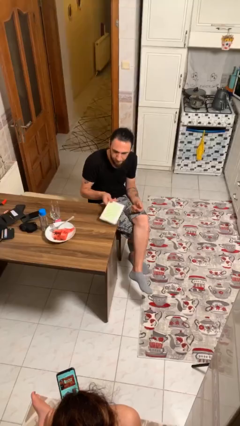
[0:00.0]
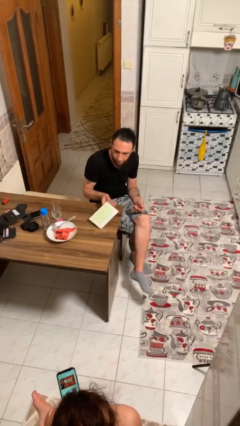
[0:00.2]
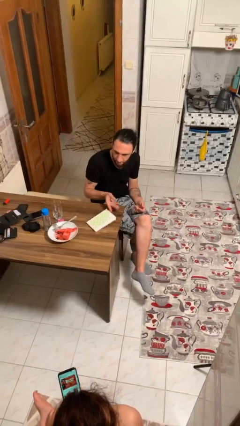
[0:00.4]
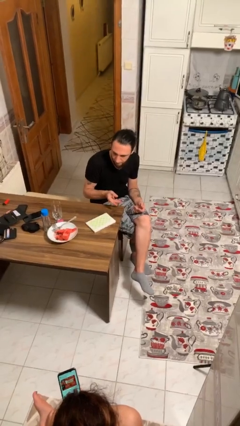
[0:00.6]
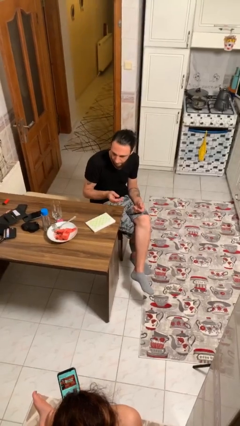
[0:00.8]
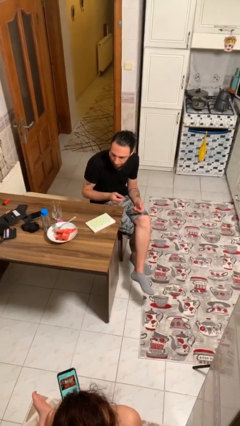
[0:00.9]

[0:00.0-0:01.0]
person puts down object on table

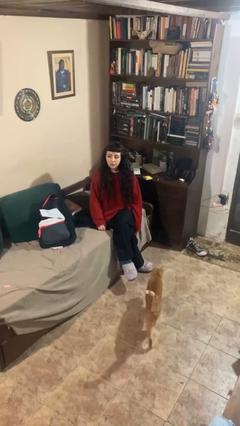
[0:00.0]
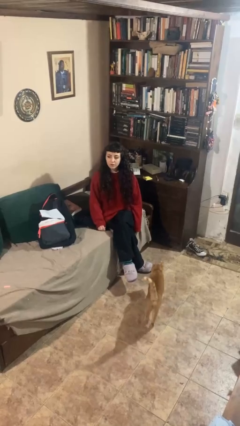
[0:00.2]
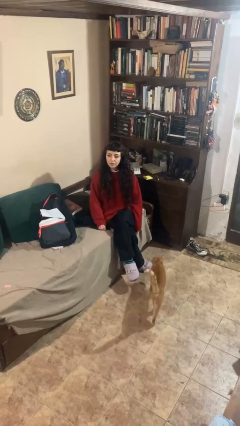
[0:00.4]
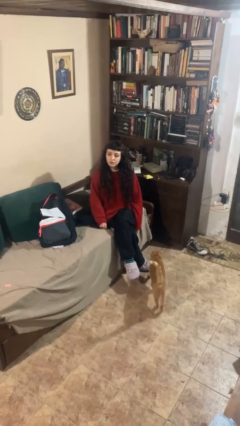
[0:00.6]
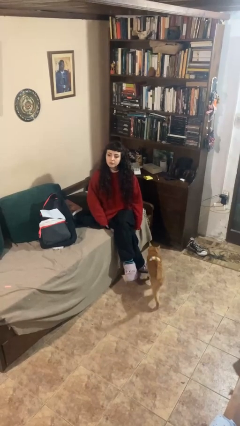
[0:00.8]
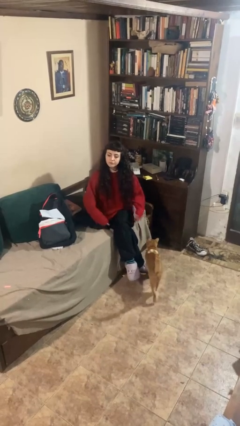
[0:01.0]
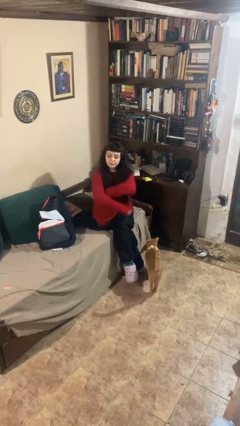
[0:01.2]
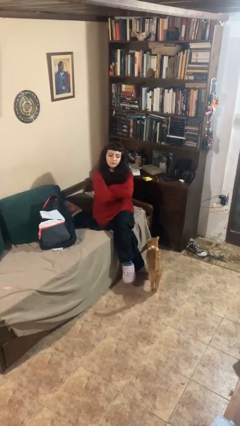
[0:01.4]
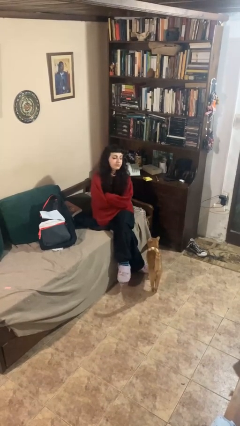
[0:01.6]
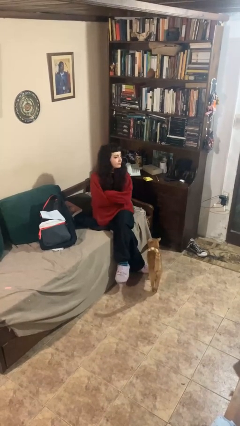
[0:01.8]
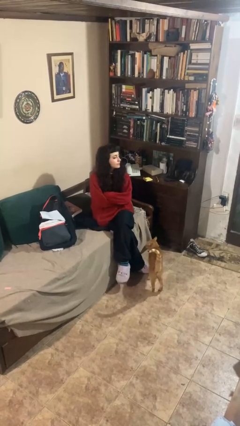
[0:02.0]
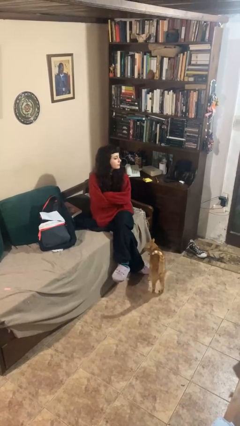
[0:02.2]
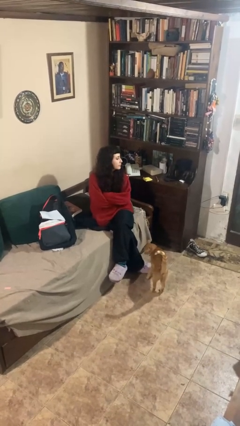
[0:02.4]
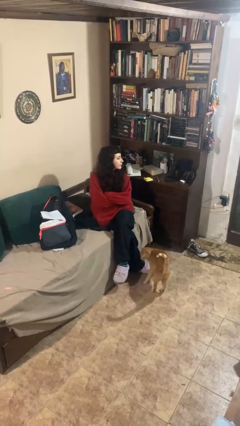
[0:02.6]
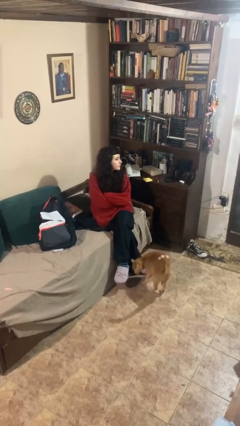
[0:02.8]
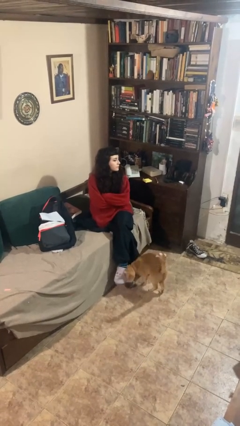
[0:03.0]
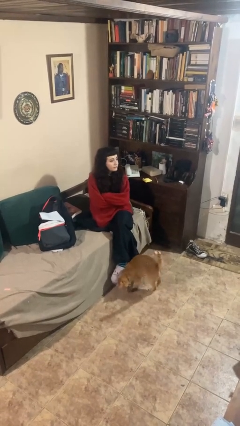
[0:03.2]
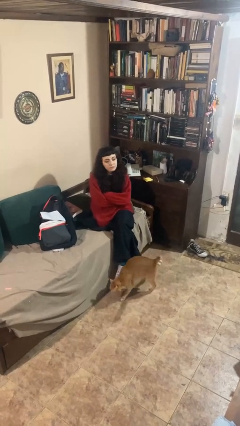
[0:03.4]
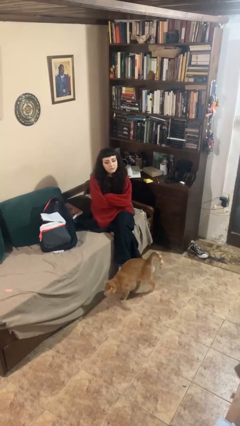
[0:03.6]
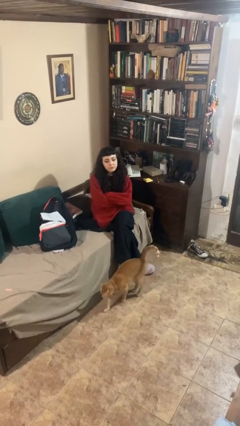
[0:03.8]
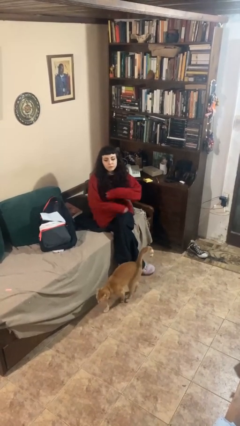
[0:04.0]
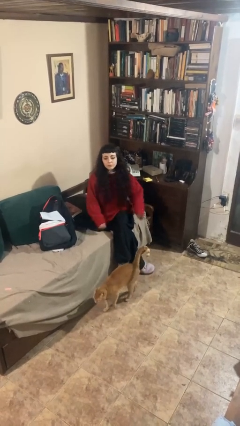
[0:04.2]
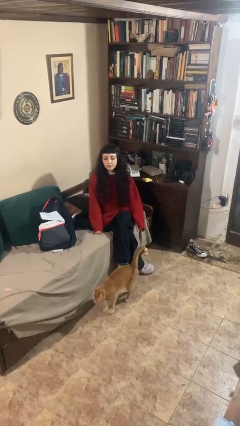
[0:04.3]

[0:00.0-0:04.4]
person crosses arms

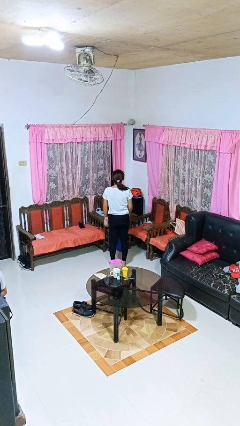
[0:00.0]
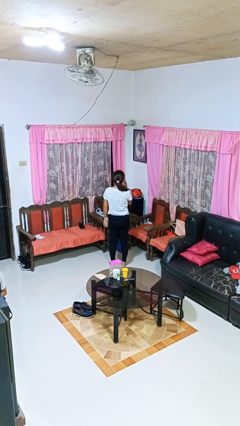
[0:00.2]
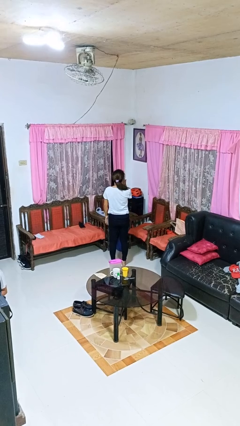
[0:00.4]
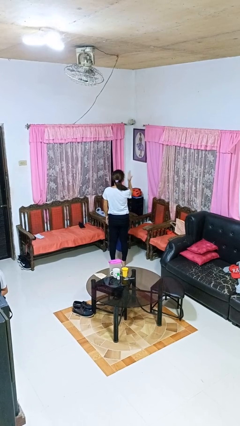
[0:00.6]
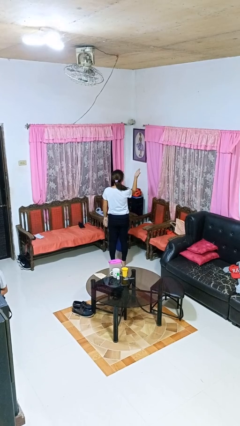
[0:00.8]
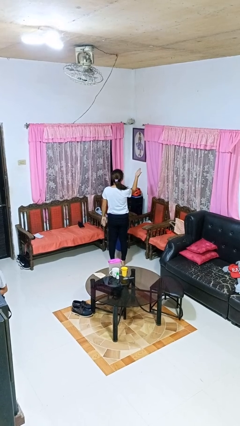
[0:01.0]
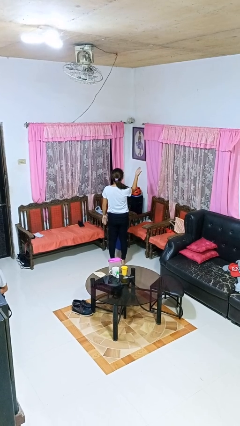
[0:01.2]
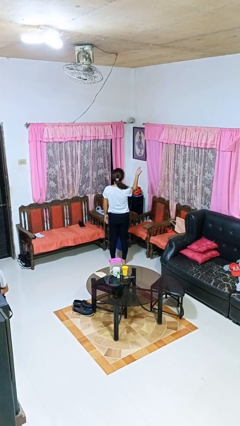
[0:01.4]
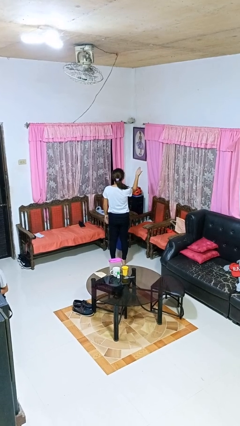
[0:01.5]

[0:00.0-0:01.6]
person gestures blow kiss

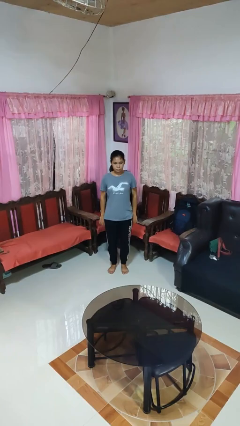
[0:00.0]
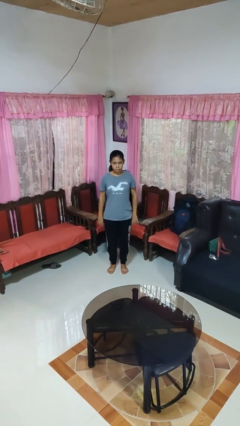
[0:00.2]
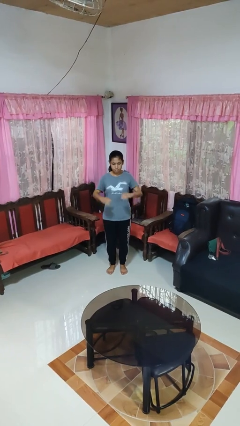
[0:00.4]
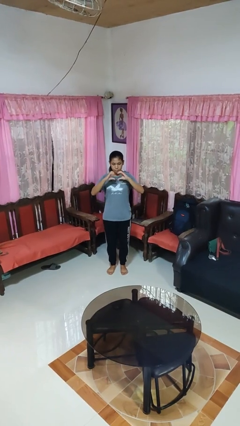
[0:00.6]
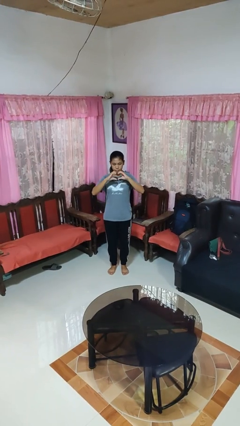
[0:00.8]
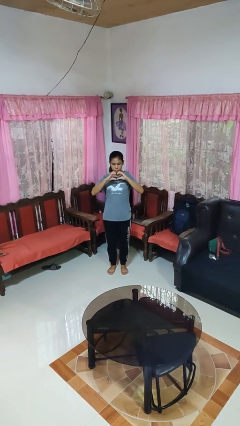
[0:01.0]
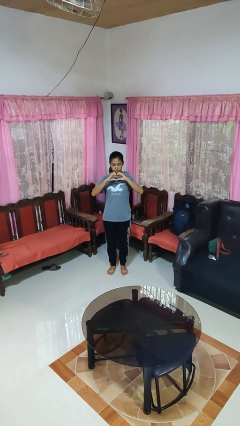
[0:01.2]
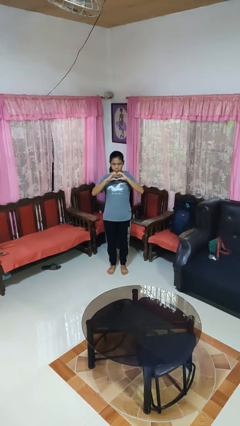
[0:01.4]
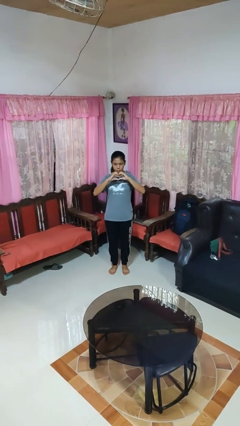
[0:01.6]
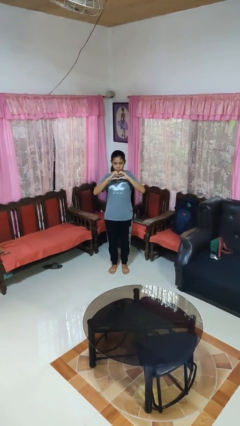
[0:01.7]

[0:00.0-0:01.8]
person gestures heart

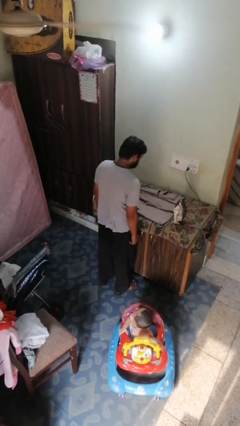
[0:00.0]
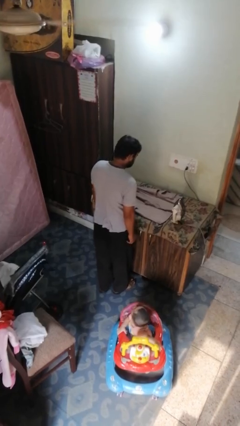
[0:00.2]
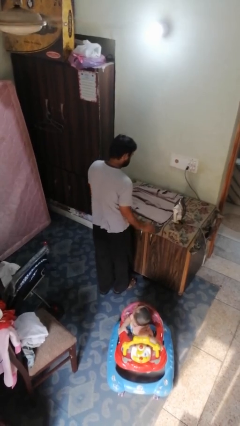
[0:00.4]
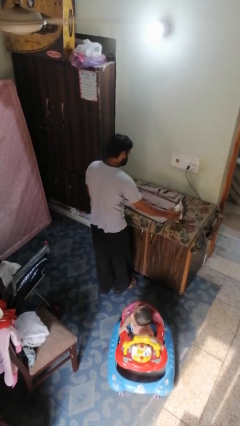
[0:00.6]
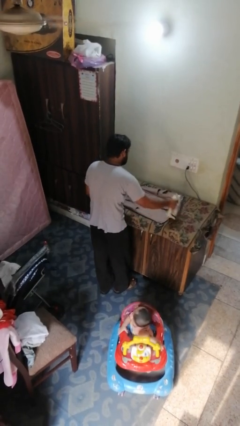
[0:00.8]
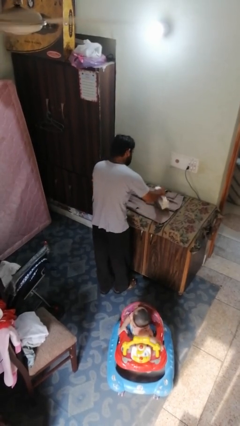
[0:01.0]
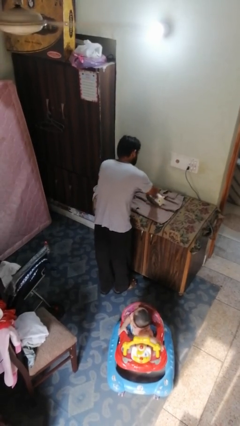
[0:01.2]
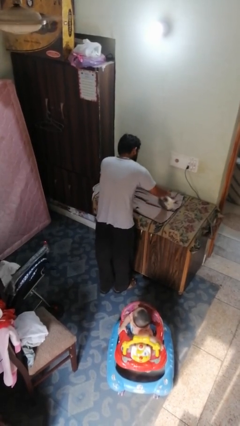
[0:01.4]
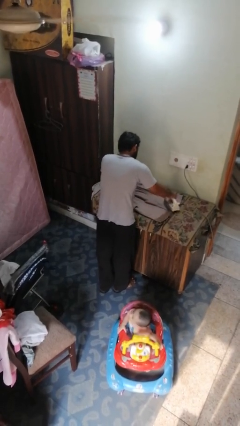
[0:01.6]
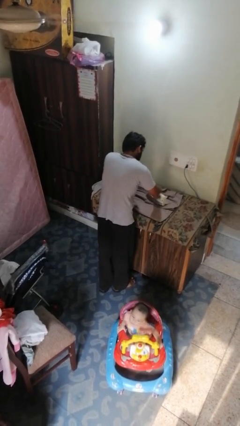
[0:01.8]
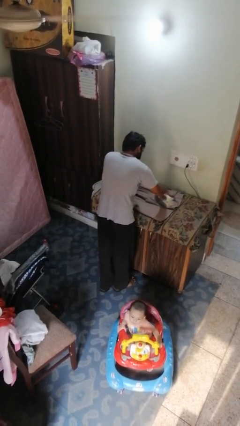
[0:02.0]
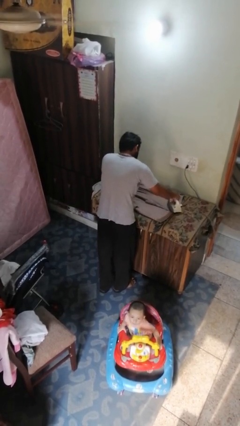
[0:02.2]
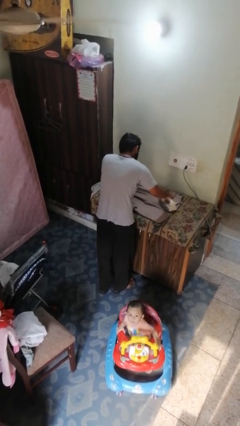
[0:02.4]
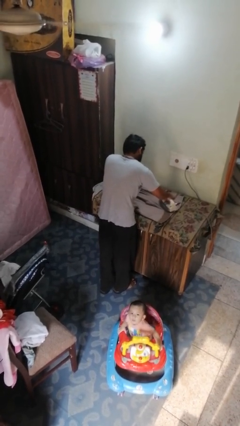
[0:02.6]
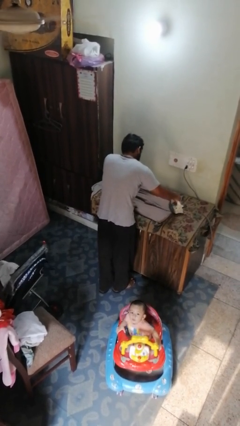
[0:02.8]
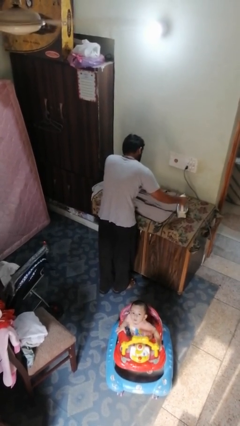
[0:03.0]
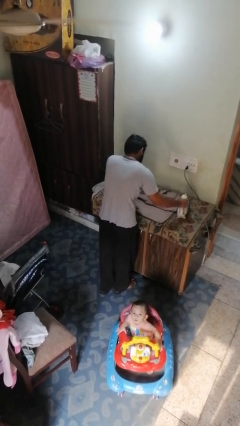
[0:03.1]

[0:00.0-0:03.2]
person irons clothes

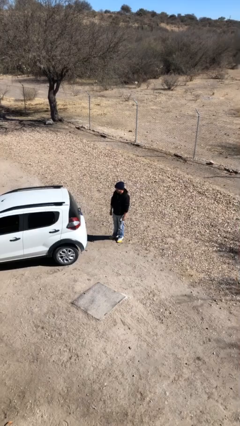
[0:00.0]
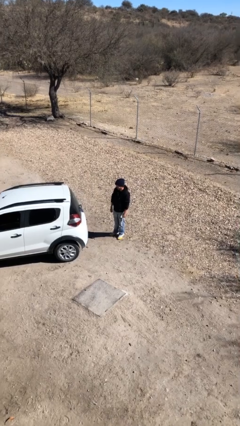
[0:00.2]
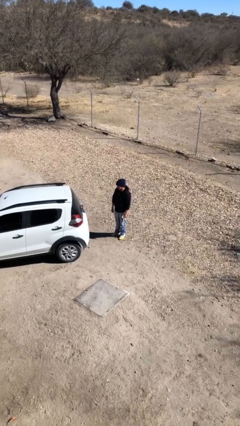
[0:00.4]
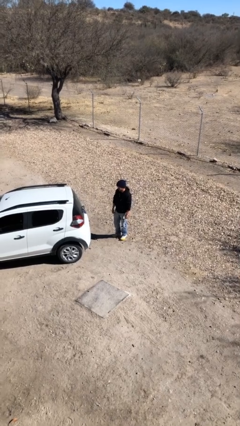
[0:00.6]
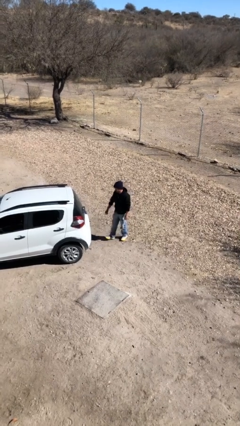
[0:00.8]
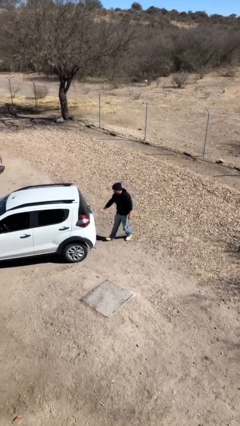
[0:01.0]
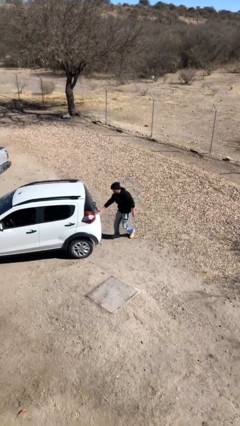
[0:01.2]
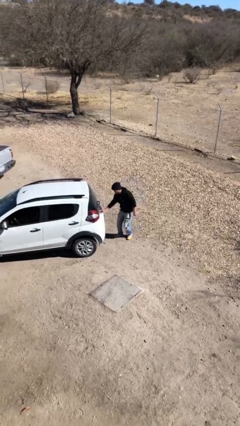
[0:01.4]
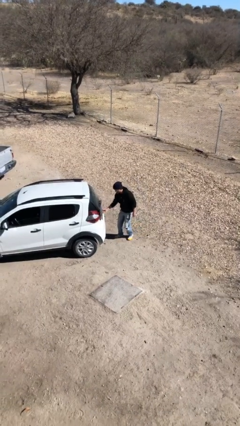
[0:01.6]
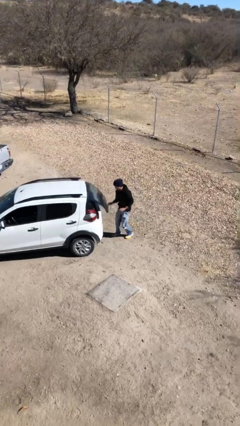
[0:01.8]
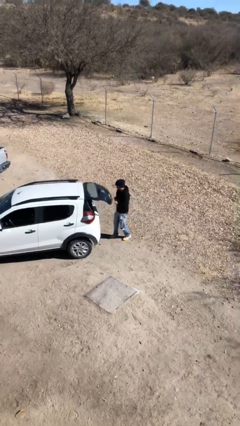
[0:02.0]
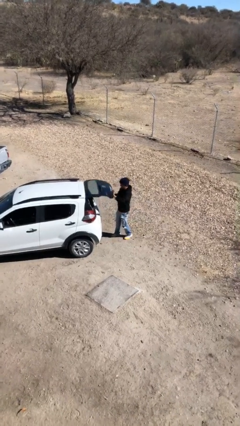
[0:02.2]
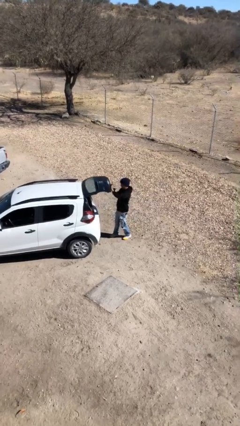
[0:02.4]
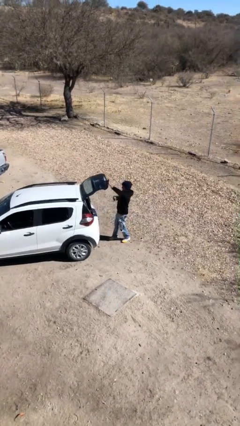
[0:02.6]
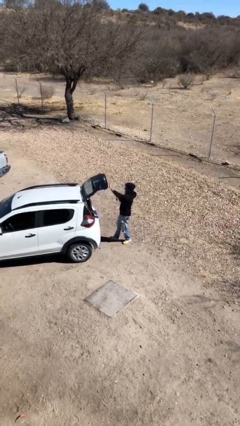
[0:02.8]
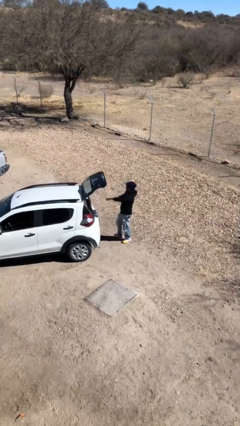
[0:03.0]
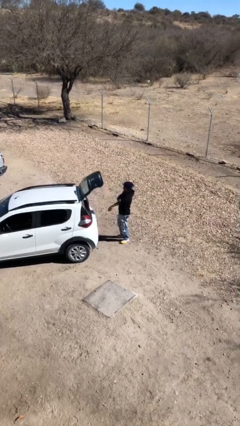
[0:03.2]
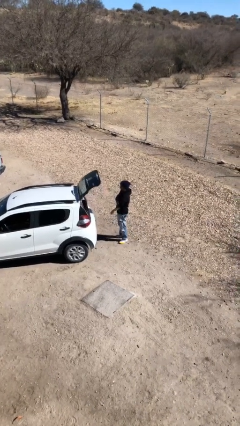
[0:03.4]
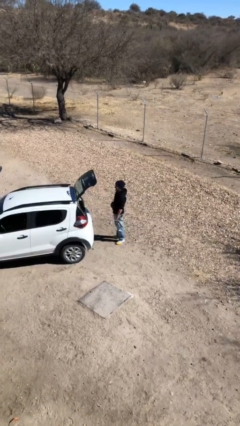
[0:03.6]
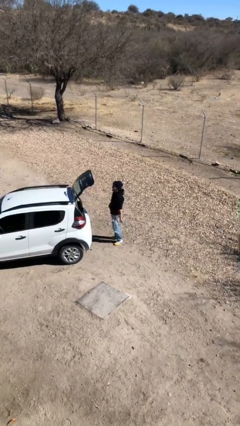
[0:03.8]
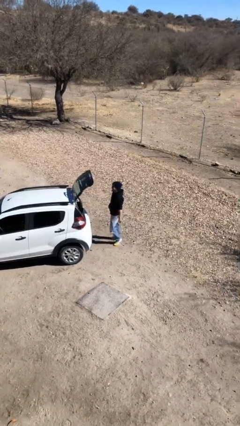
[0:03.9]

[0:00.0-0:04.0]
person opens car trunk

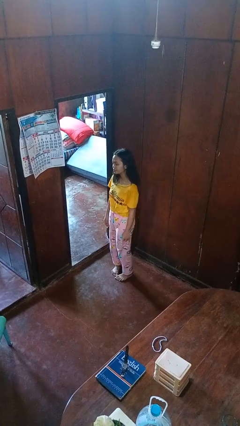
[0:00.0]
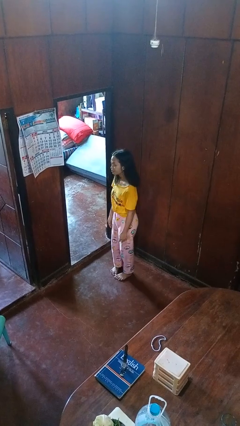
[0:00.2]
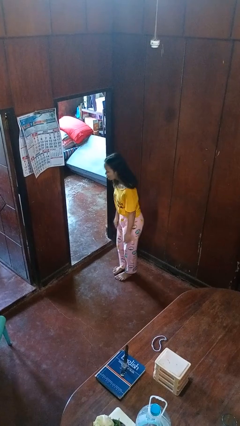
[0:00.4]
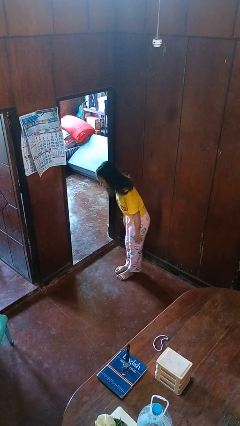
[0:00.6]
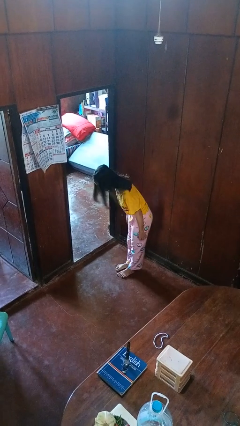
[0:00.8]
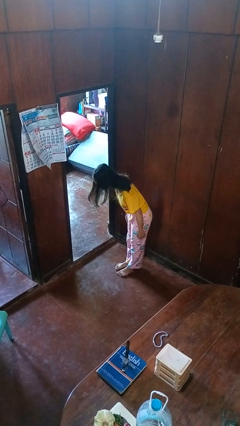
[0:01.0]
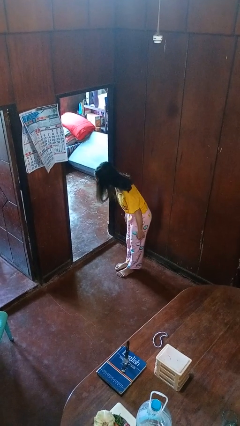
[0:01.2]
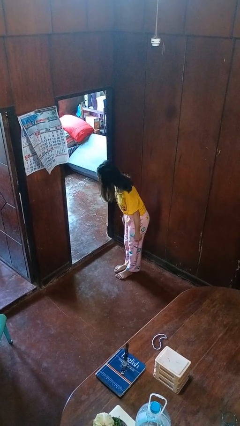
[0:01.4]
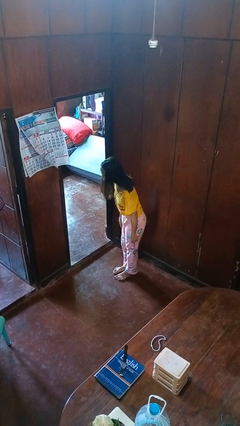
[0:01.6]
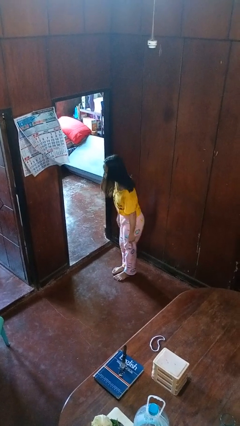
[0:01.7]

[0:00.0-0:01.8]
person bows
